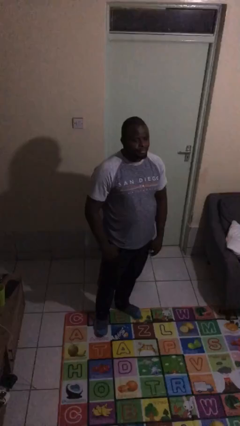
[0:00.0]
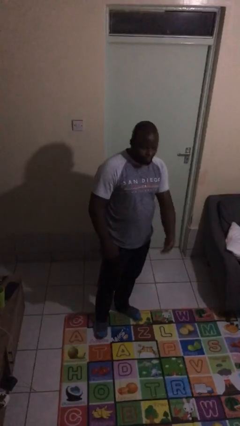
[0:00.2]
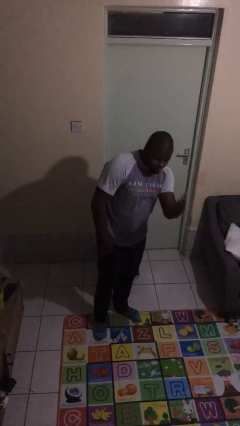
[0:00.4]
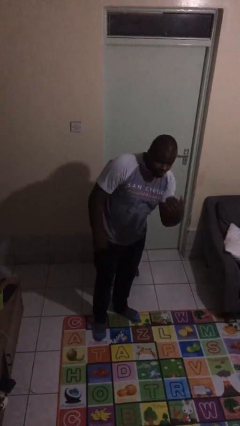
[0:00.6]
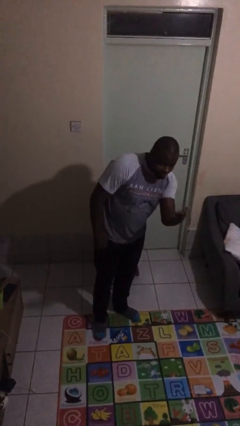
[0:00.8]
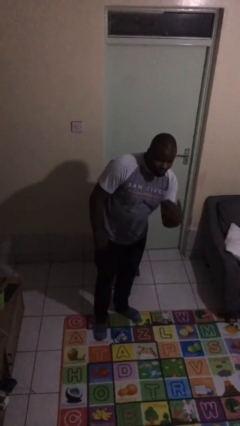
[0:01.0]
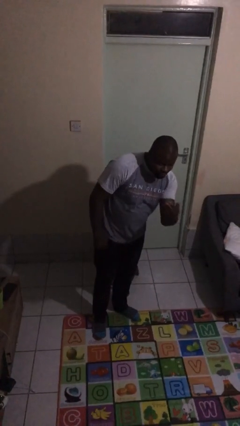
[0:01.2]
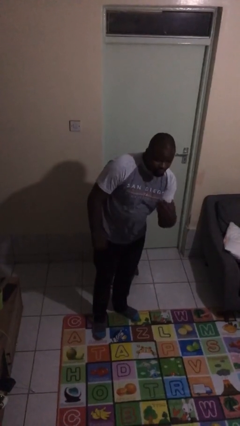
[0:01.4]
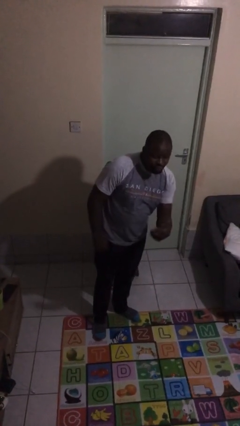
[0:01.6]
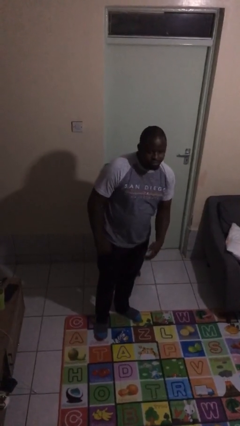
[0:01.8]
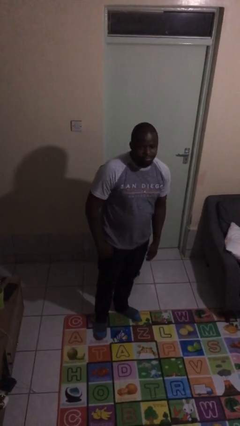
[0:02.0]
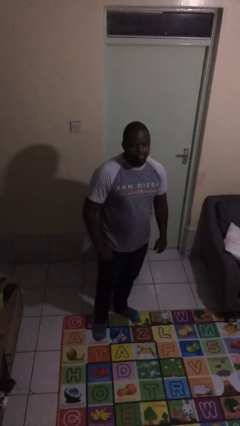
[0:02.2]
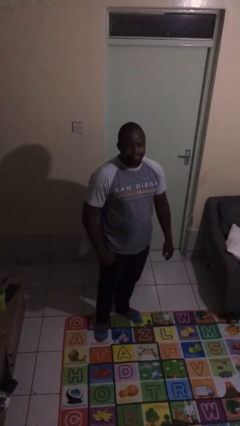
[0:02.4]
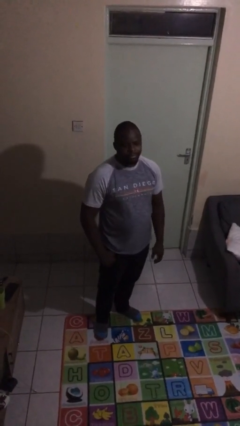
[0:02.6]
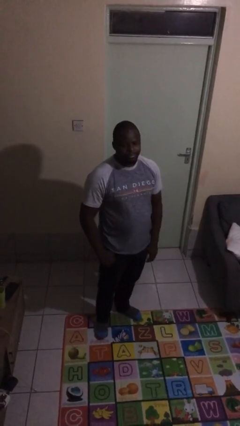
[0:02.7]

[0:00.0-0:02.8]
person gestures come here

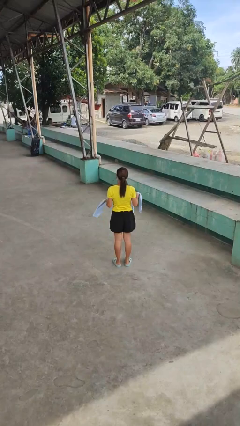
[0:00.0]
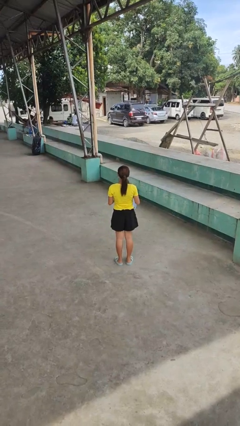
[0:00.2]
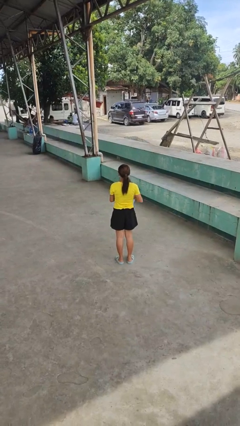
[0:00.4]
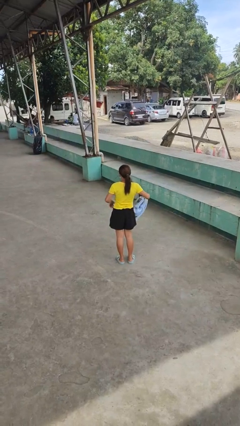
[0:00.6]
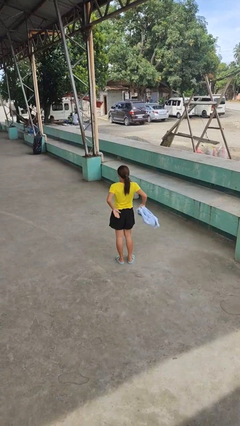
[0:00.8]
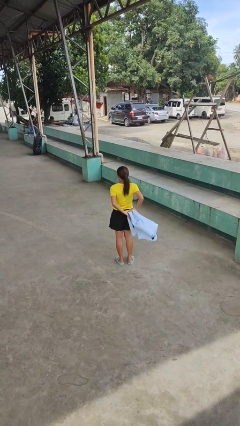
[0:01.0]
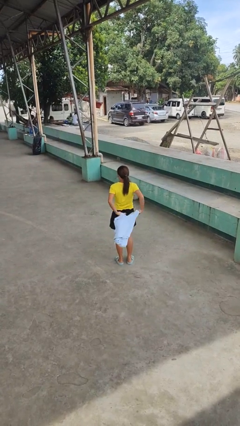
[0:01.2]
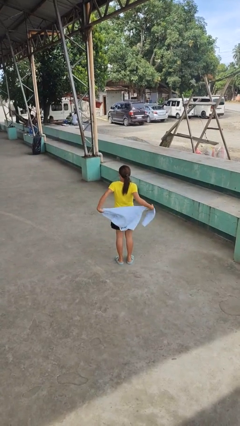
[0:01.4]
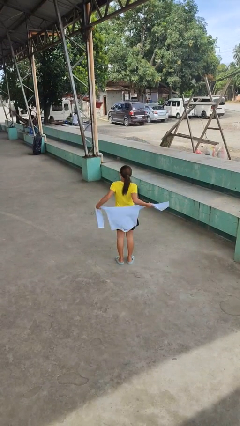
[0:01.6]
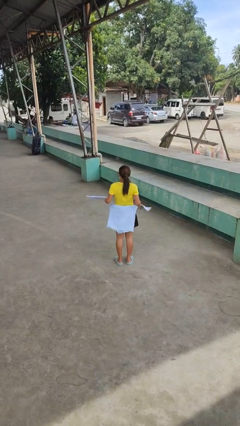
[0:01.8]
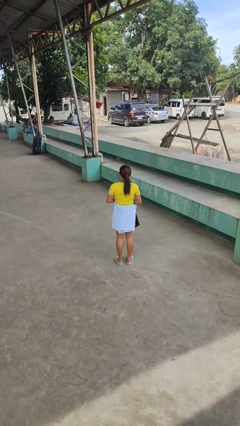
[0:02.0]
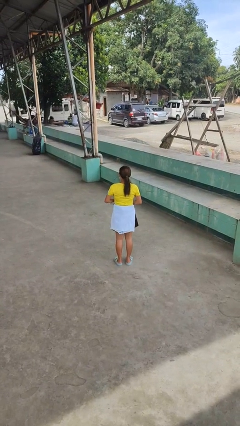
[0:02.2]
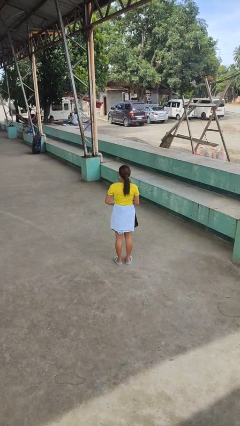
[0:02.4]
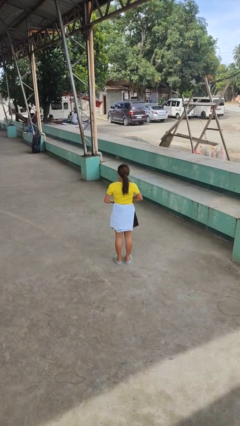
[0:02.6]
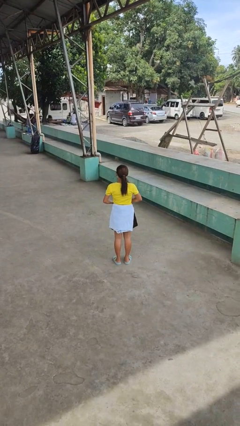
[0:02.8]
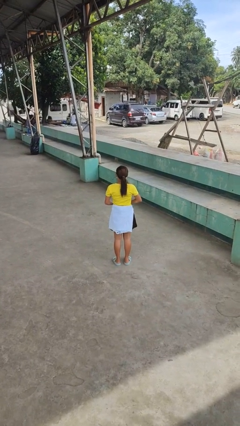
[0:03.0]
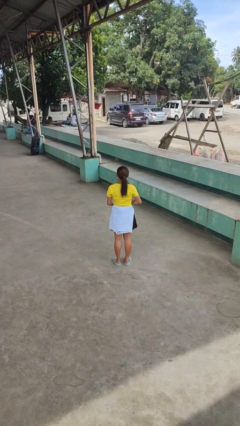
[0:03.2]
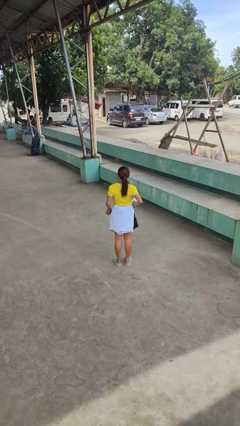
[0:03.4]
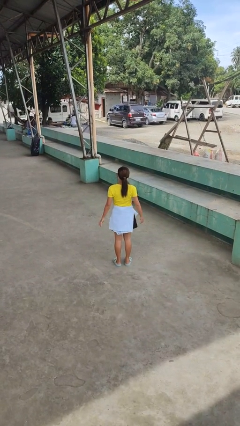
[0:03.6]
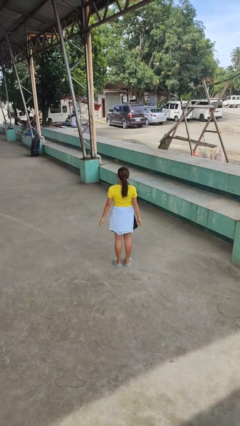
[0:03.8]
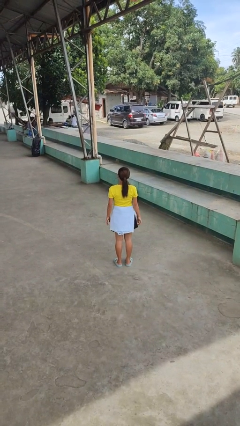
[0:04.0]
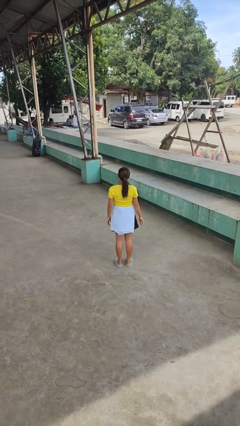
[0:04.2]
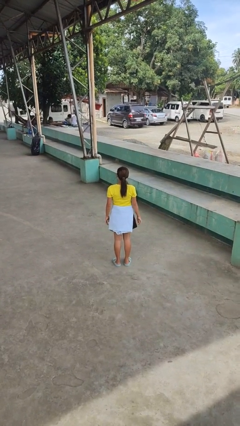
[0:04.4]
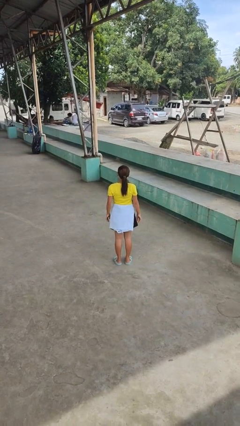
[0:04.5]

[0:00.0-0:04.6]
person ties jacket around waist

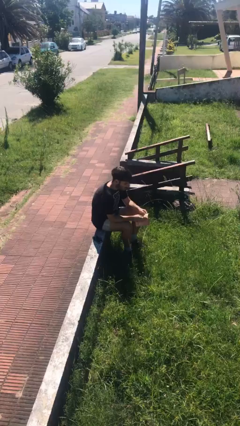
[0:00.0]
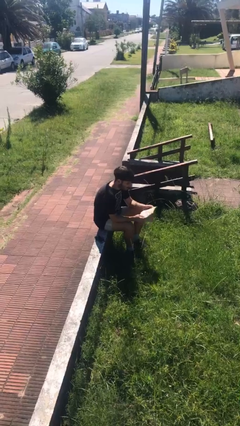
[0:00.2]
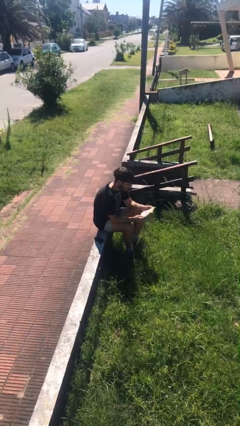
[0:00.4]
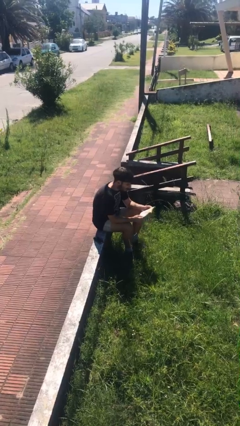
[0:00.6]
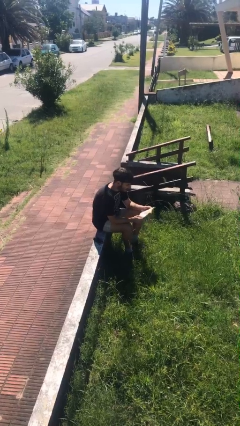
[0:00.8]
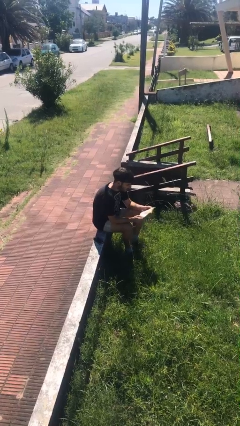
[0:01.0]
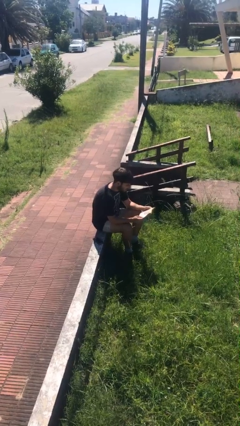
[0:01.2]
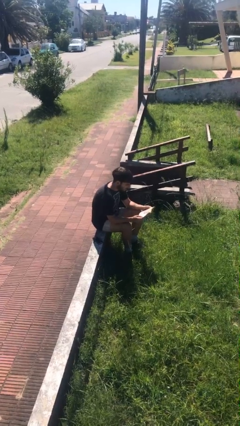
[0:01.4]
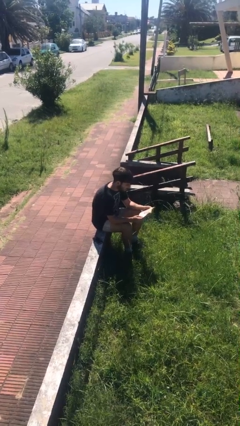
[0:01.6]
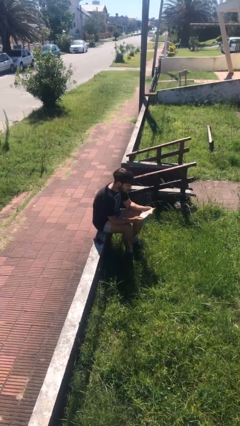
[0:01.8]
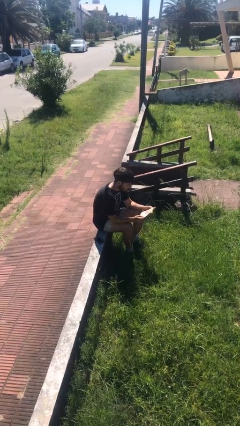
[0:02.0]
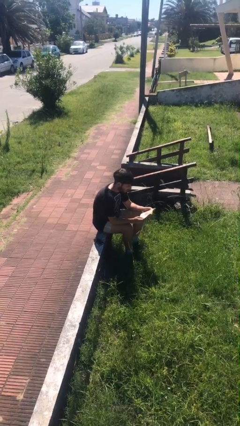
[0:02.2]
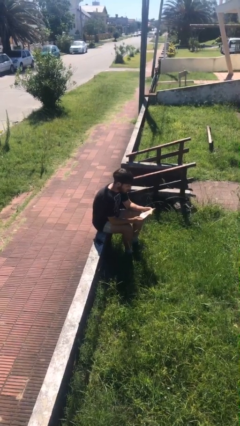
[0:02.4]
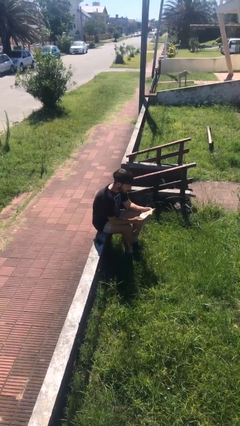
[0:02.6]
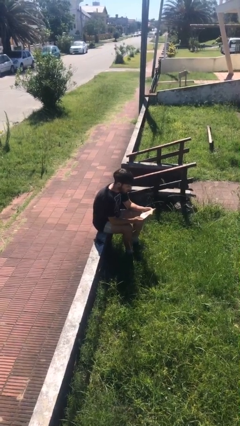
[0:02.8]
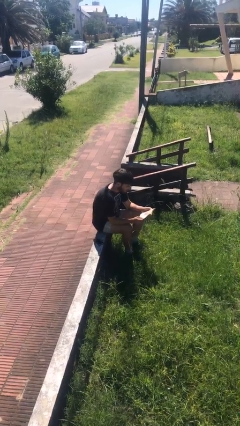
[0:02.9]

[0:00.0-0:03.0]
person reads document

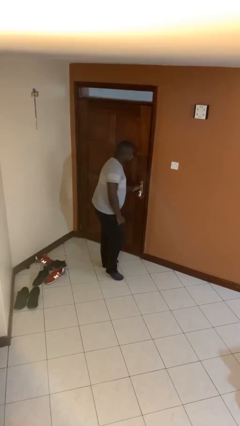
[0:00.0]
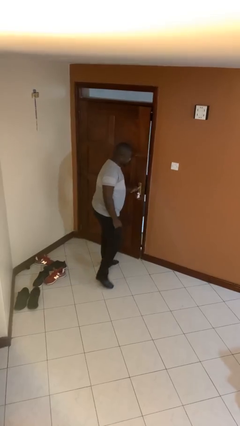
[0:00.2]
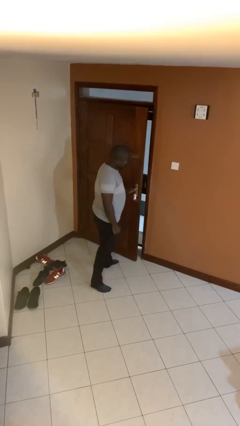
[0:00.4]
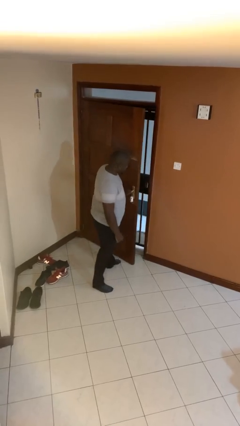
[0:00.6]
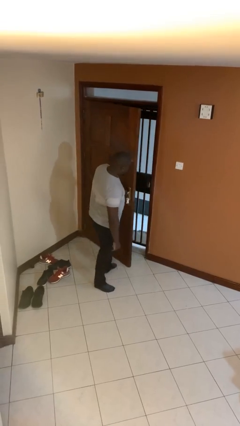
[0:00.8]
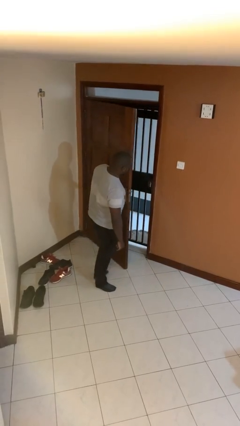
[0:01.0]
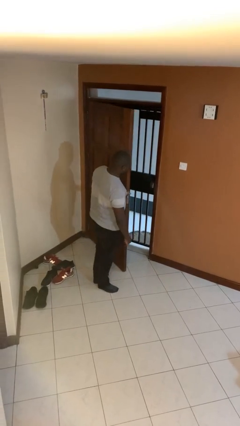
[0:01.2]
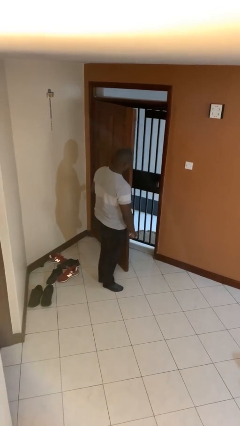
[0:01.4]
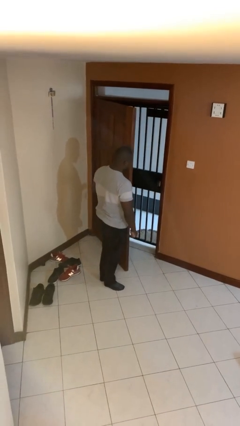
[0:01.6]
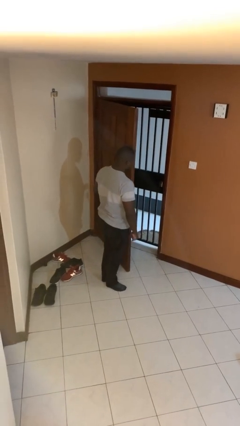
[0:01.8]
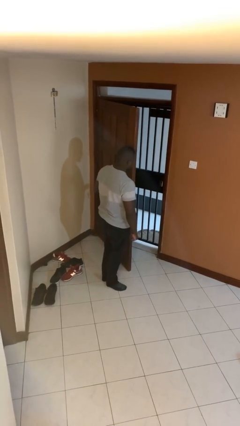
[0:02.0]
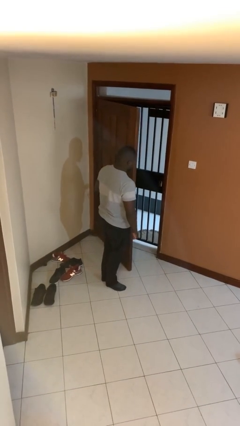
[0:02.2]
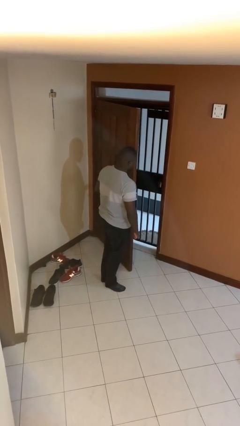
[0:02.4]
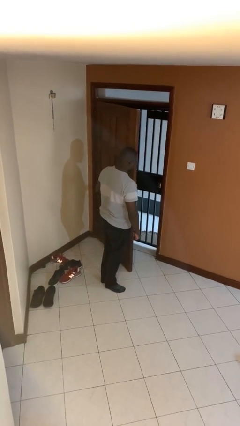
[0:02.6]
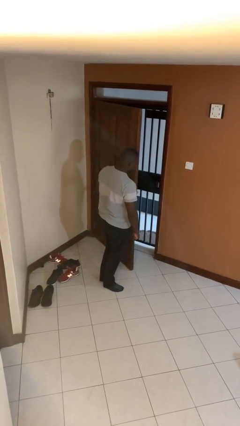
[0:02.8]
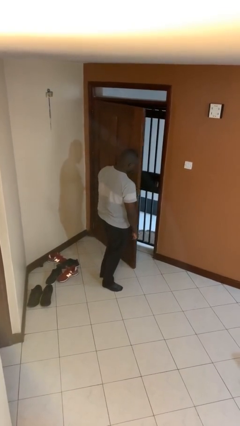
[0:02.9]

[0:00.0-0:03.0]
person opens facility door

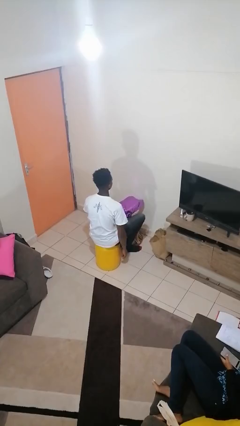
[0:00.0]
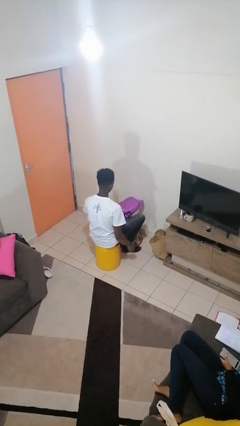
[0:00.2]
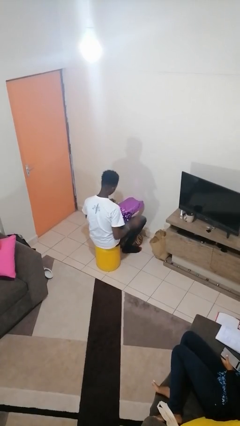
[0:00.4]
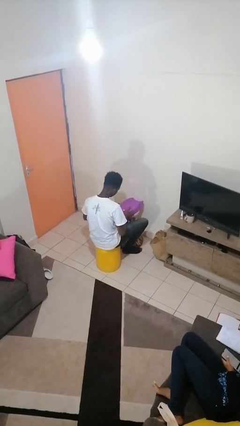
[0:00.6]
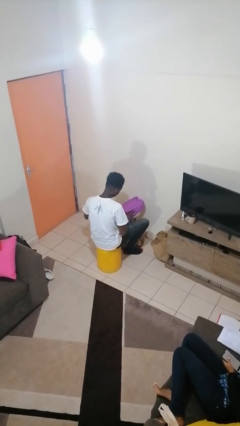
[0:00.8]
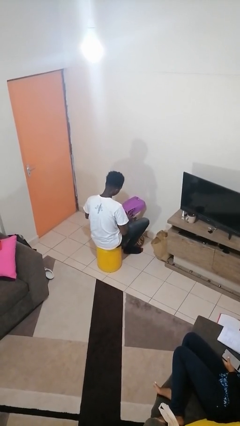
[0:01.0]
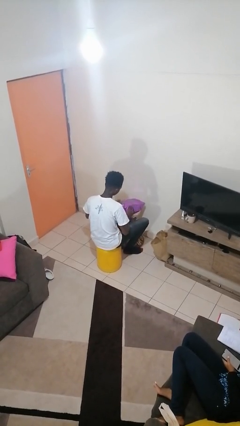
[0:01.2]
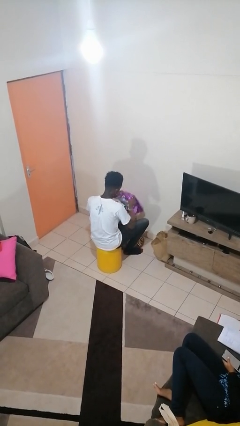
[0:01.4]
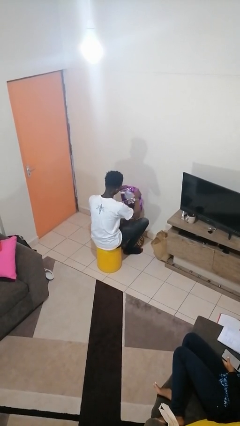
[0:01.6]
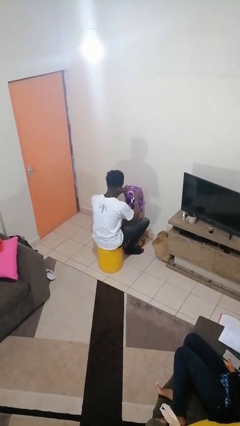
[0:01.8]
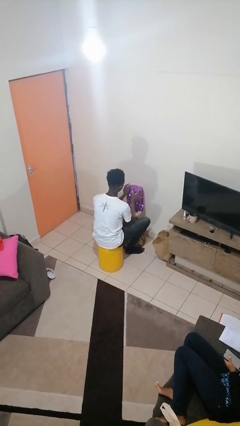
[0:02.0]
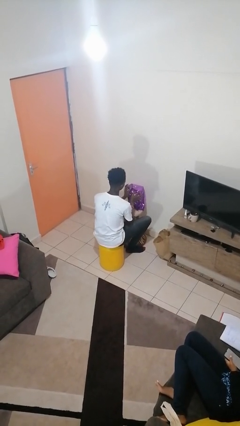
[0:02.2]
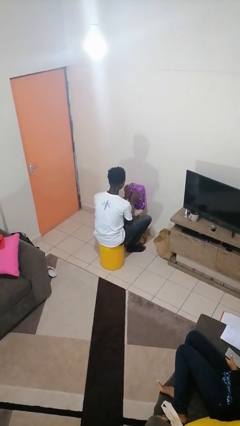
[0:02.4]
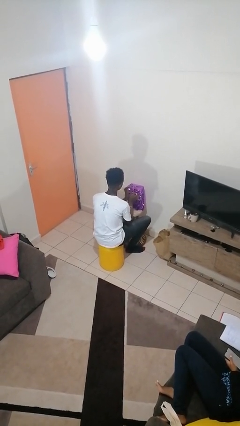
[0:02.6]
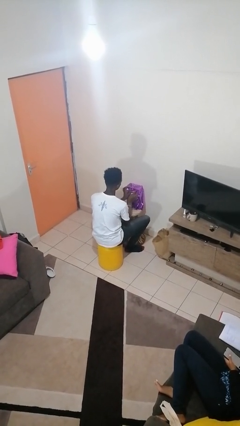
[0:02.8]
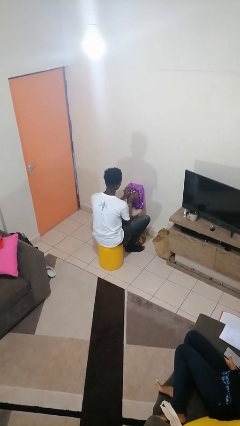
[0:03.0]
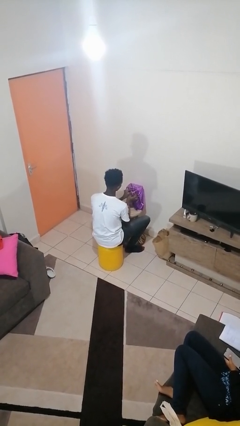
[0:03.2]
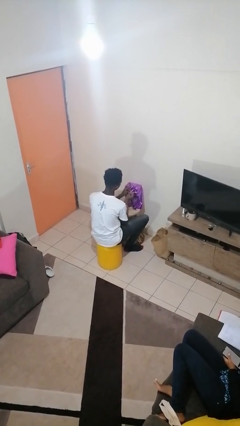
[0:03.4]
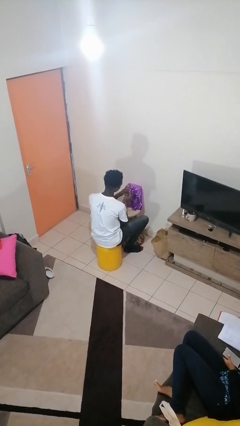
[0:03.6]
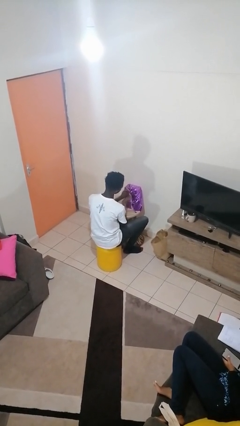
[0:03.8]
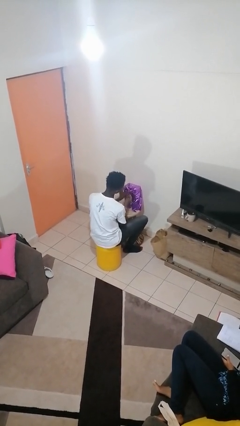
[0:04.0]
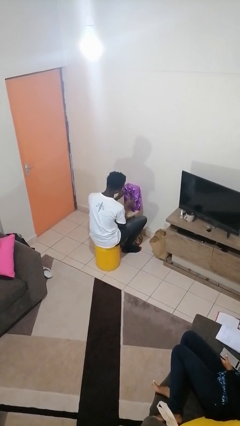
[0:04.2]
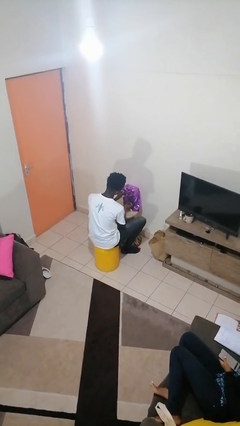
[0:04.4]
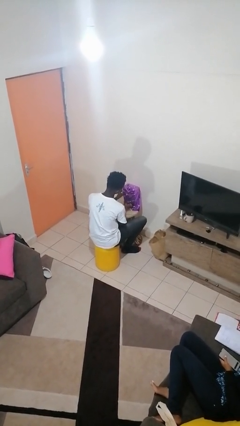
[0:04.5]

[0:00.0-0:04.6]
person wraps box
